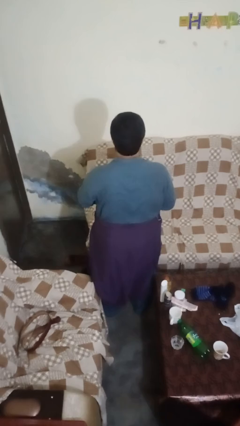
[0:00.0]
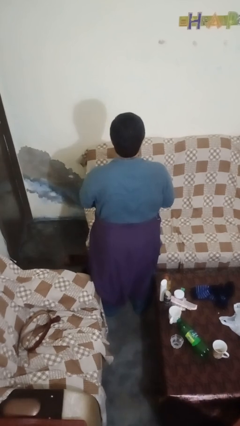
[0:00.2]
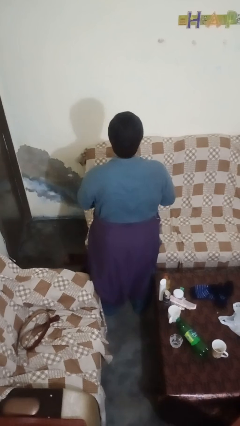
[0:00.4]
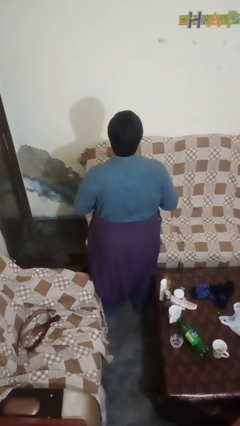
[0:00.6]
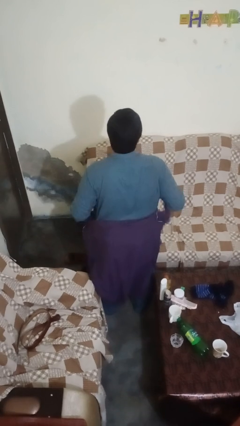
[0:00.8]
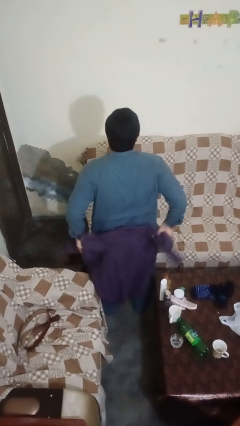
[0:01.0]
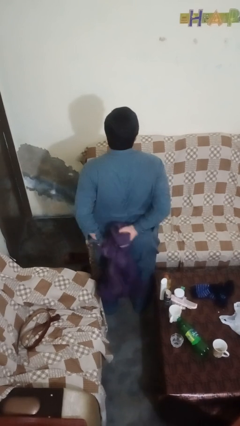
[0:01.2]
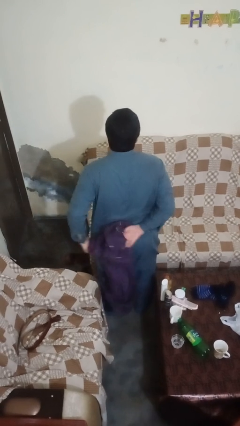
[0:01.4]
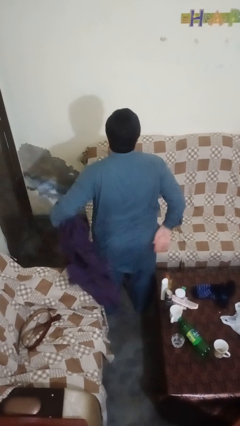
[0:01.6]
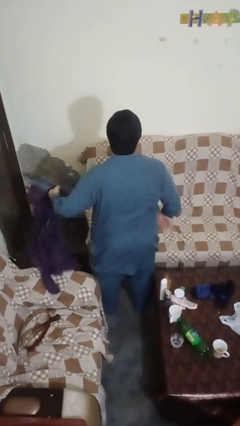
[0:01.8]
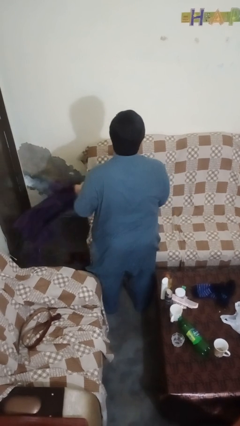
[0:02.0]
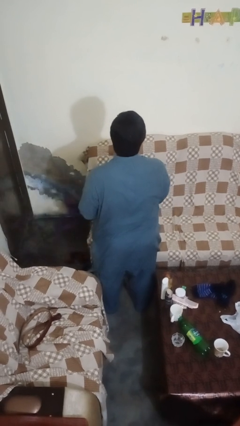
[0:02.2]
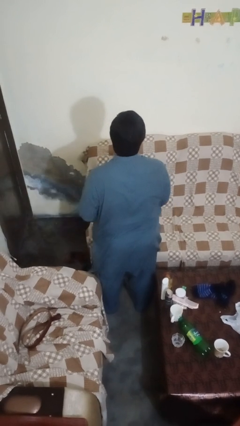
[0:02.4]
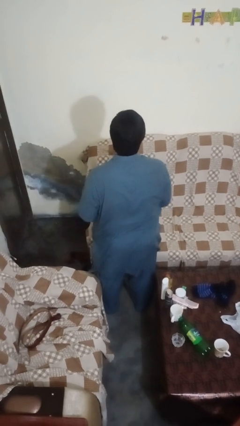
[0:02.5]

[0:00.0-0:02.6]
person unties jacket around waist

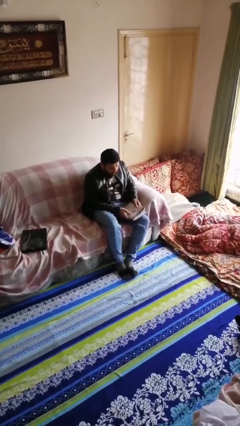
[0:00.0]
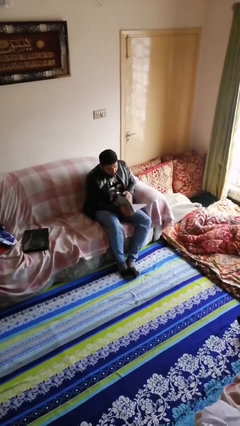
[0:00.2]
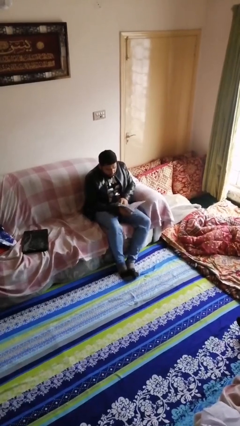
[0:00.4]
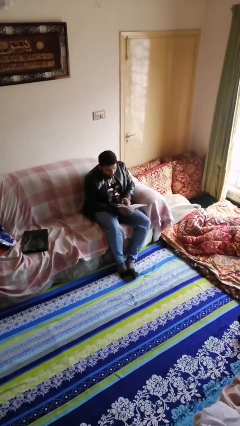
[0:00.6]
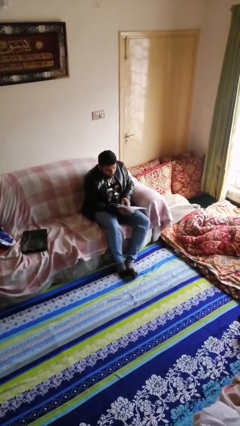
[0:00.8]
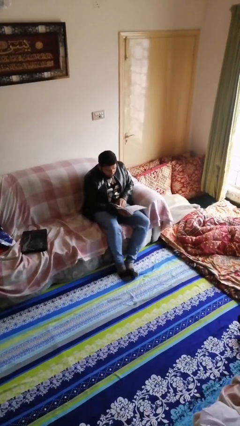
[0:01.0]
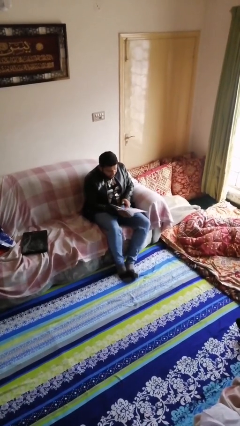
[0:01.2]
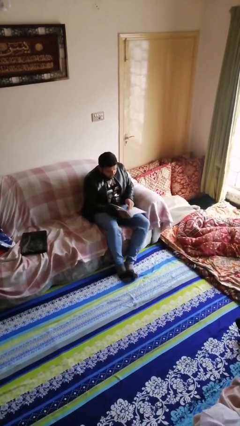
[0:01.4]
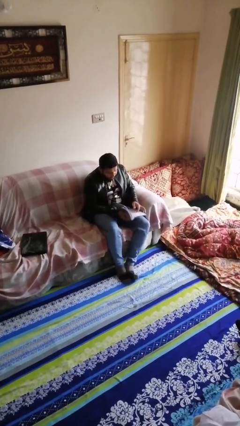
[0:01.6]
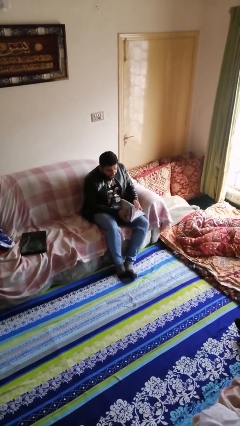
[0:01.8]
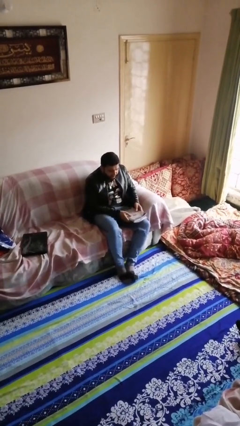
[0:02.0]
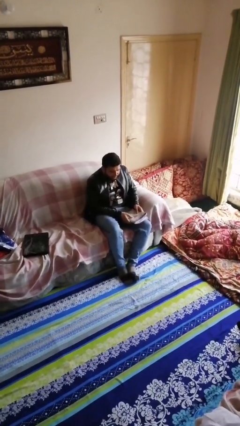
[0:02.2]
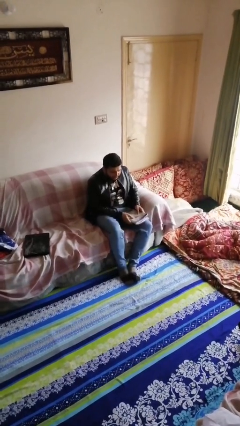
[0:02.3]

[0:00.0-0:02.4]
person reads document

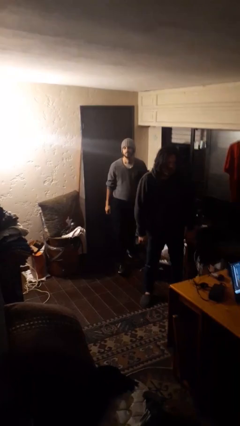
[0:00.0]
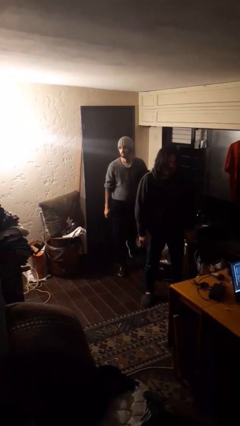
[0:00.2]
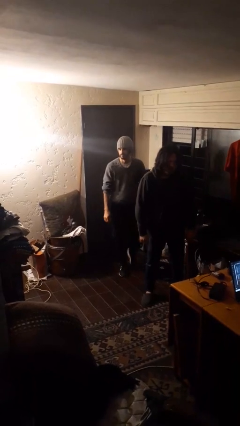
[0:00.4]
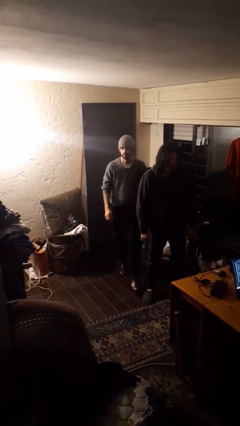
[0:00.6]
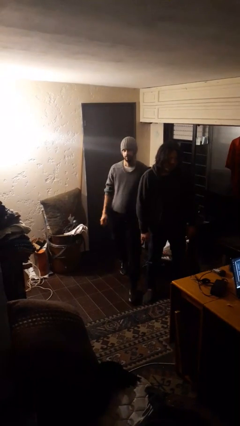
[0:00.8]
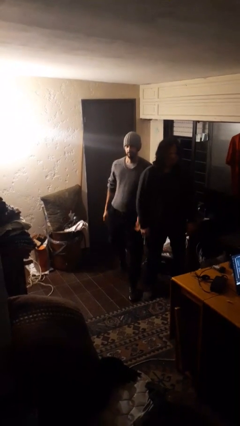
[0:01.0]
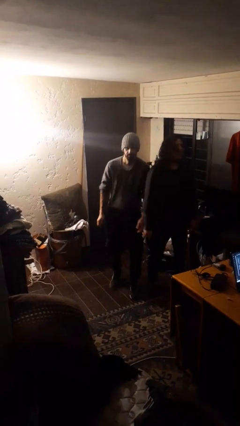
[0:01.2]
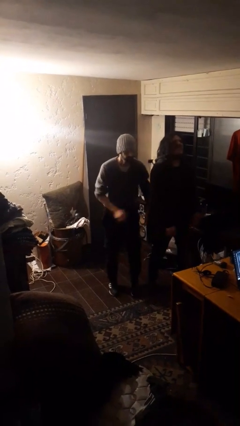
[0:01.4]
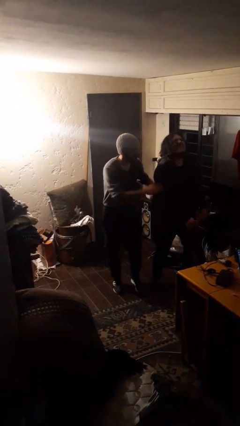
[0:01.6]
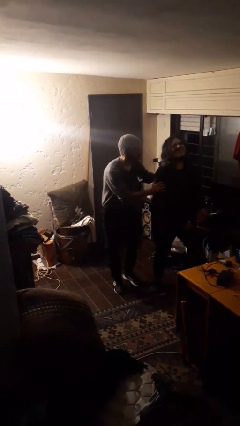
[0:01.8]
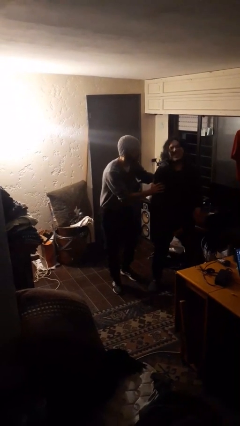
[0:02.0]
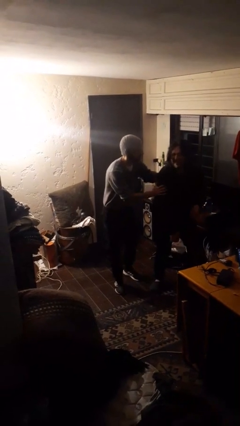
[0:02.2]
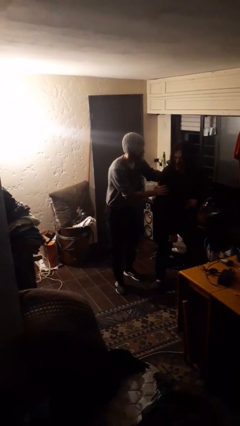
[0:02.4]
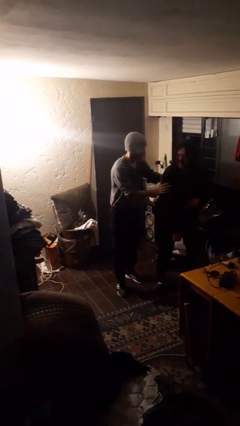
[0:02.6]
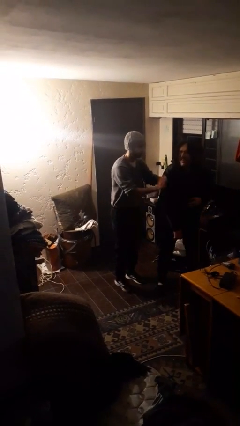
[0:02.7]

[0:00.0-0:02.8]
person bumps into person

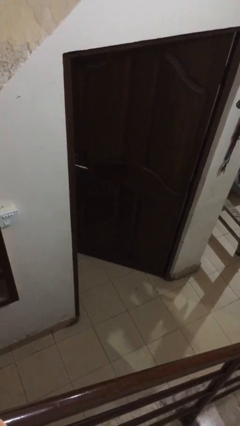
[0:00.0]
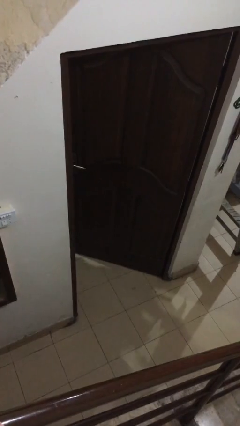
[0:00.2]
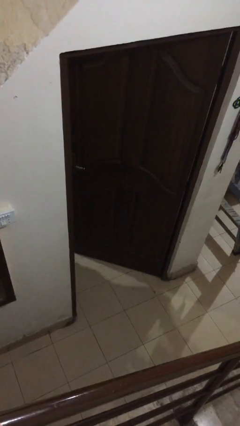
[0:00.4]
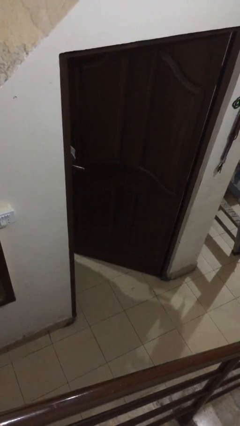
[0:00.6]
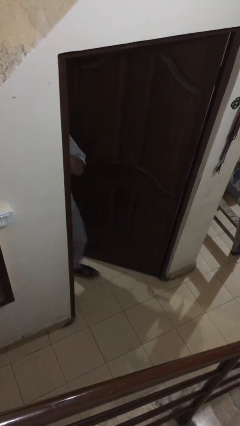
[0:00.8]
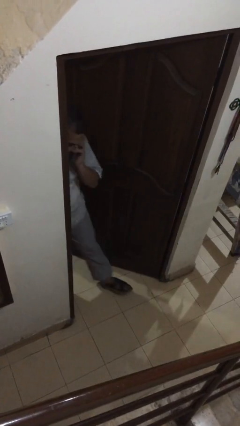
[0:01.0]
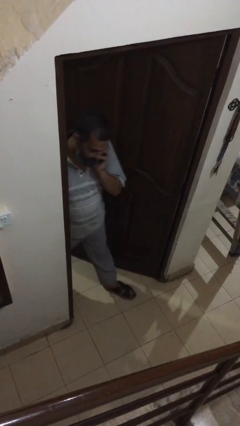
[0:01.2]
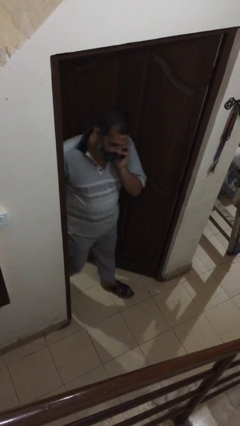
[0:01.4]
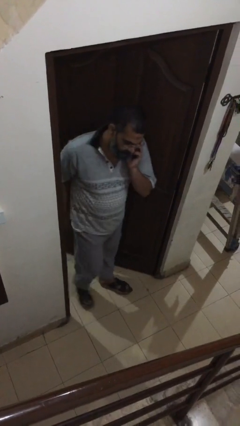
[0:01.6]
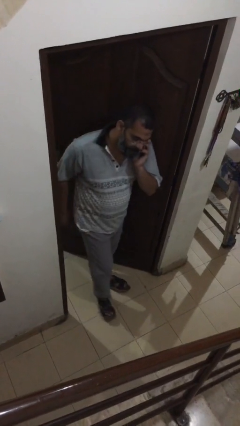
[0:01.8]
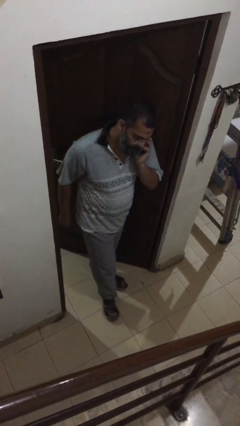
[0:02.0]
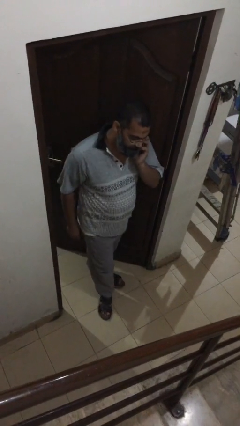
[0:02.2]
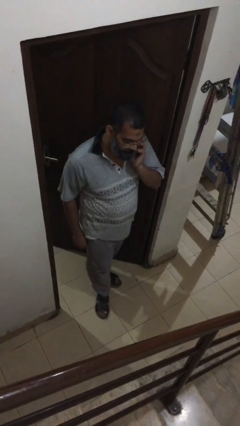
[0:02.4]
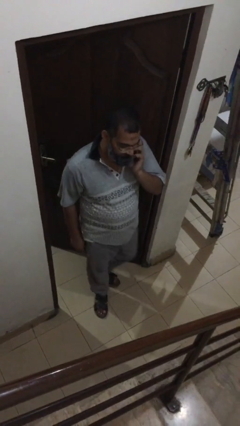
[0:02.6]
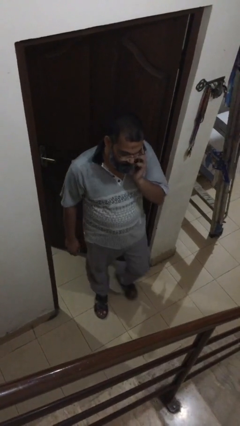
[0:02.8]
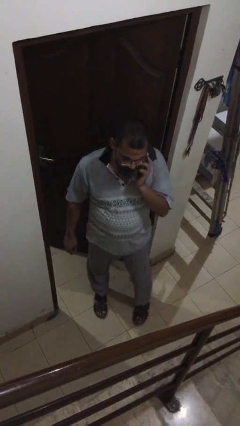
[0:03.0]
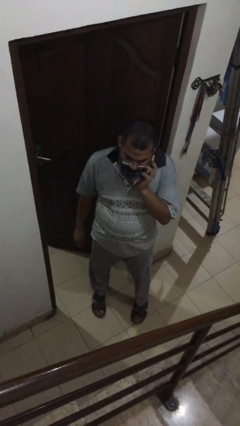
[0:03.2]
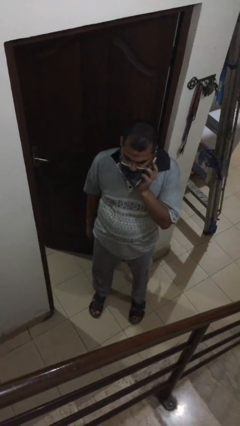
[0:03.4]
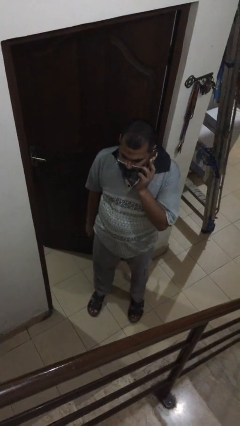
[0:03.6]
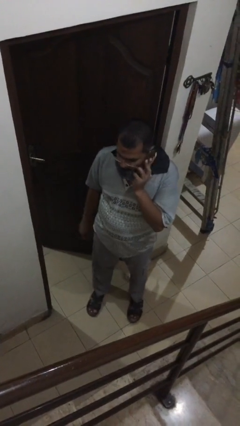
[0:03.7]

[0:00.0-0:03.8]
person enters scene through structure

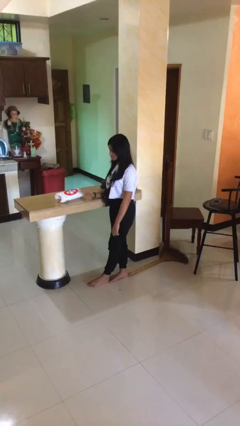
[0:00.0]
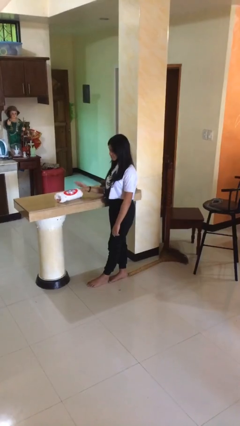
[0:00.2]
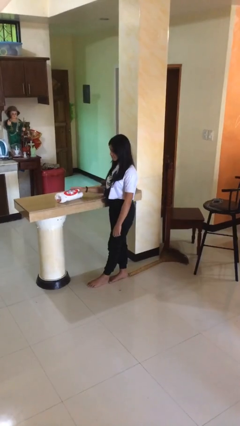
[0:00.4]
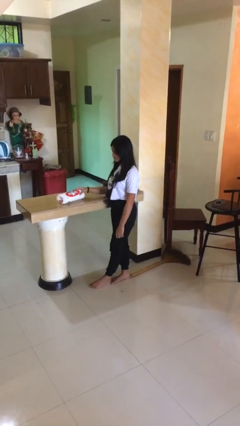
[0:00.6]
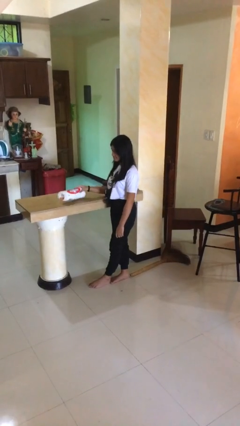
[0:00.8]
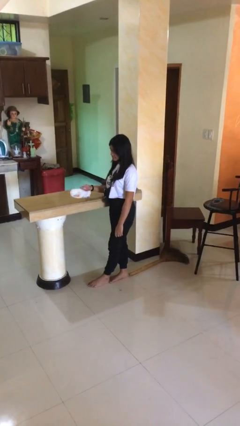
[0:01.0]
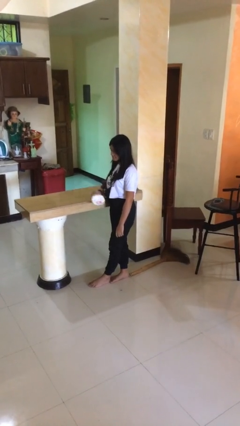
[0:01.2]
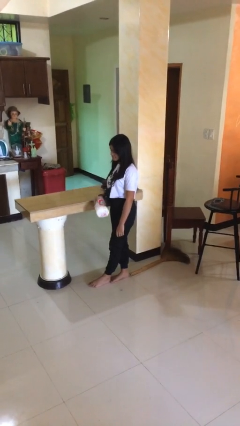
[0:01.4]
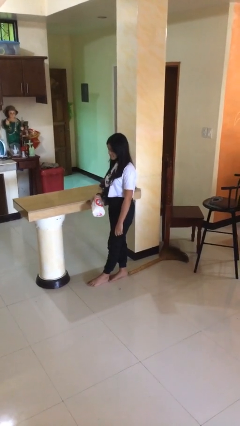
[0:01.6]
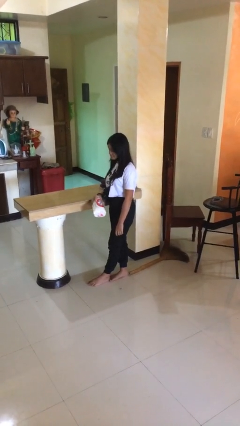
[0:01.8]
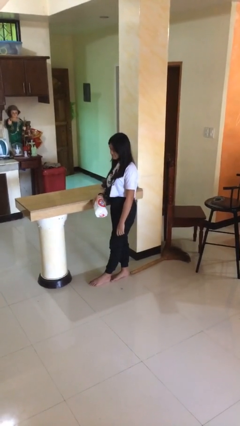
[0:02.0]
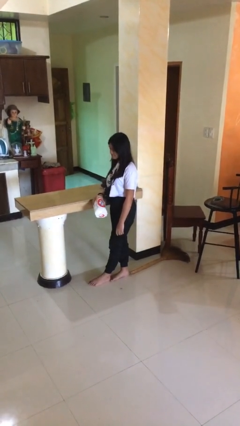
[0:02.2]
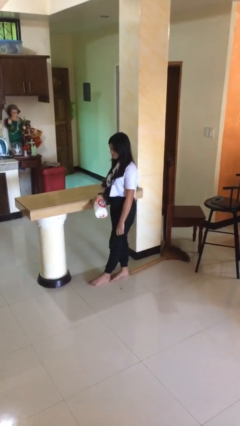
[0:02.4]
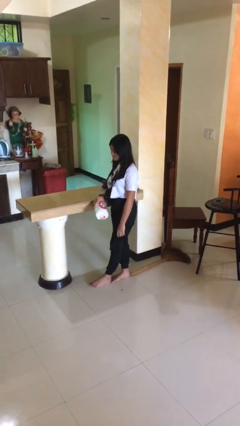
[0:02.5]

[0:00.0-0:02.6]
person picks up object from countertop

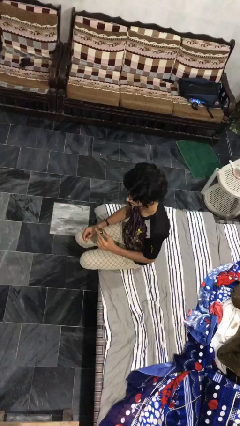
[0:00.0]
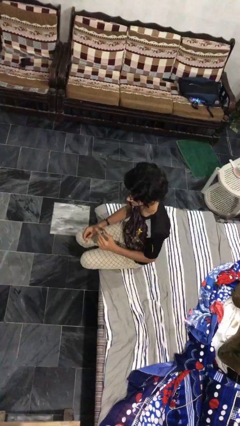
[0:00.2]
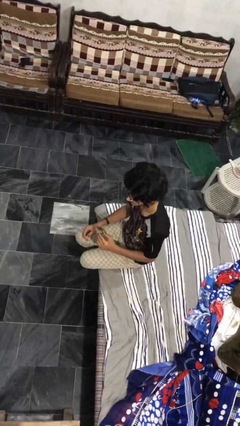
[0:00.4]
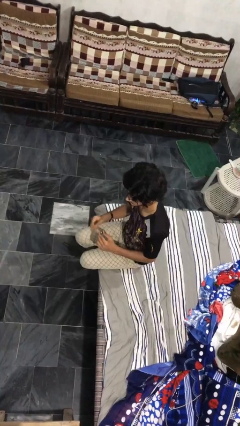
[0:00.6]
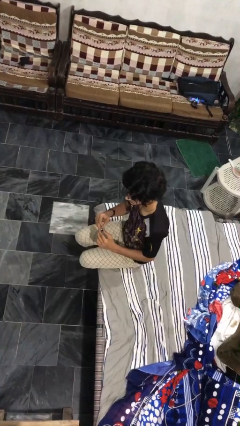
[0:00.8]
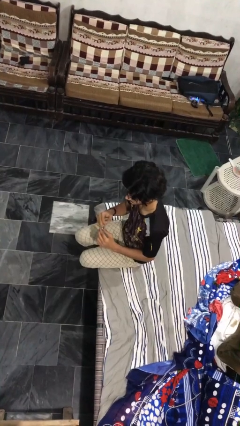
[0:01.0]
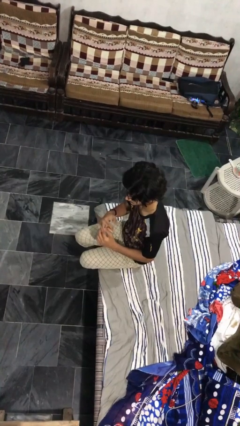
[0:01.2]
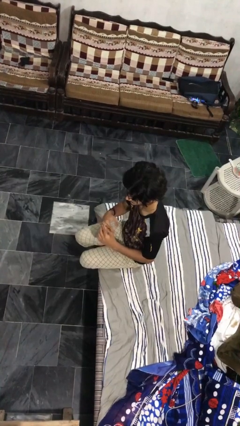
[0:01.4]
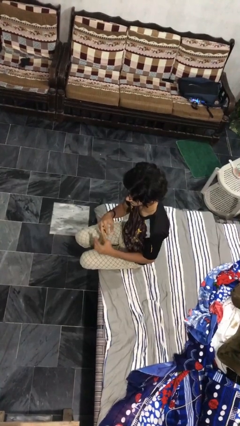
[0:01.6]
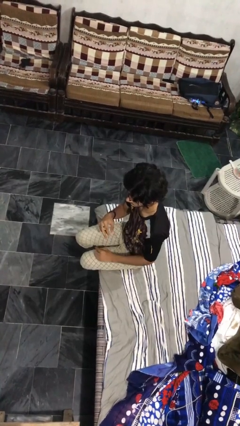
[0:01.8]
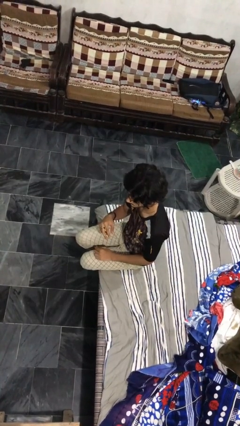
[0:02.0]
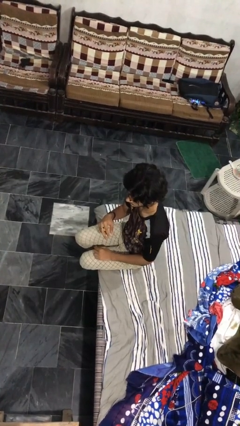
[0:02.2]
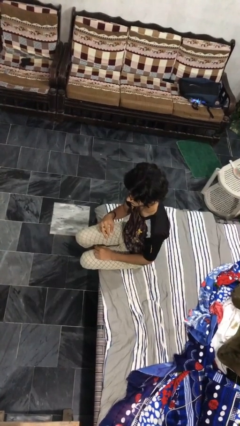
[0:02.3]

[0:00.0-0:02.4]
person puts on ring

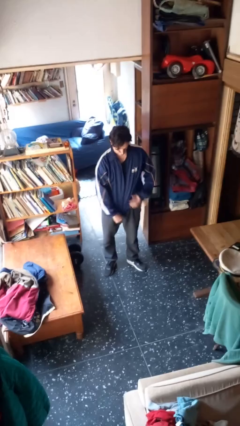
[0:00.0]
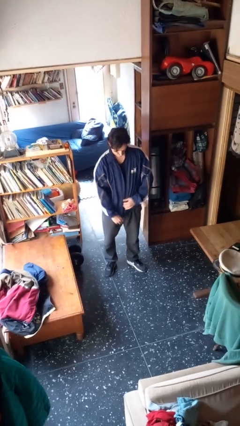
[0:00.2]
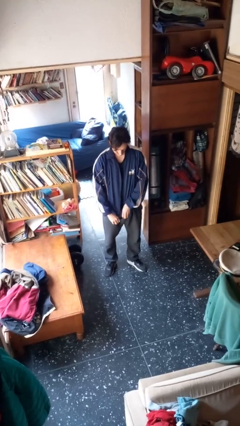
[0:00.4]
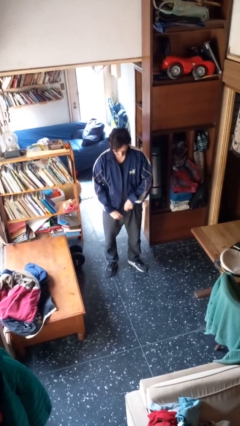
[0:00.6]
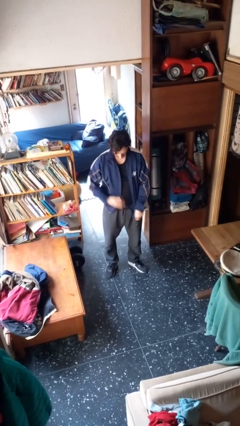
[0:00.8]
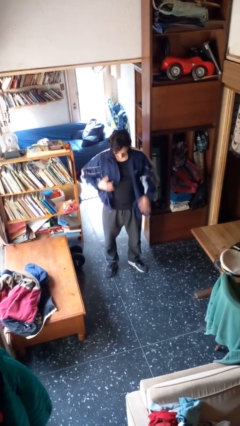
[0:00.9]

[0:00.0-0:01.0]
person unzips jacket
